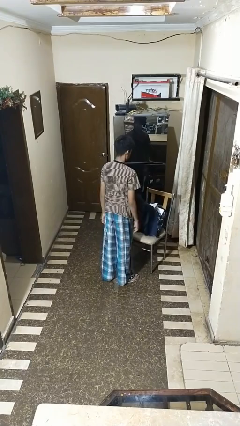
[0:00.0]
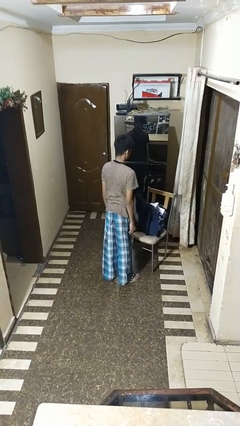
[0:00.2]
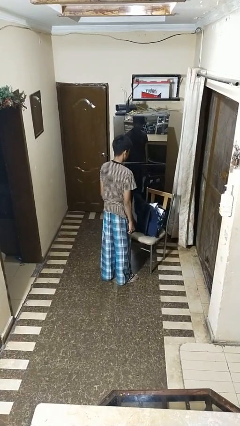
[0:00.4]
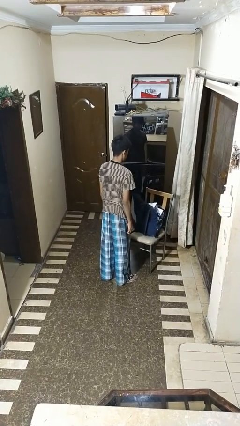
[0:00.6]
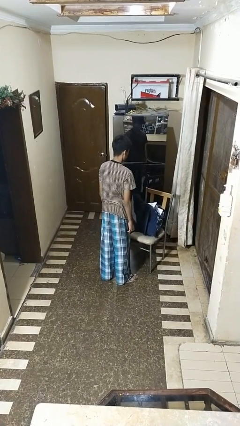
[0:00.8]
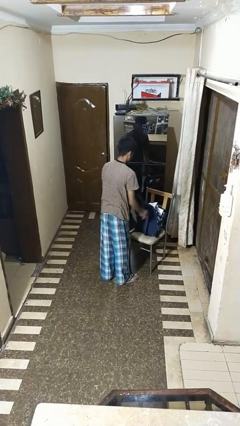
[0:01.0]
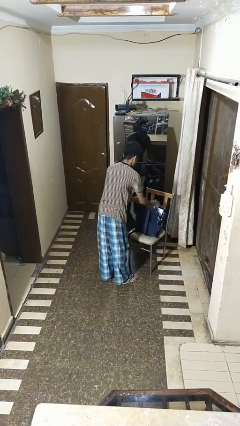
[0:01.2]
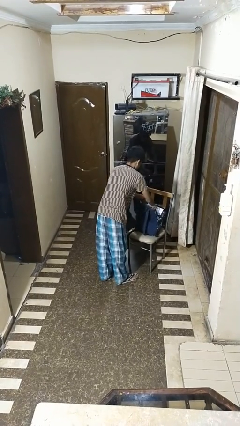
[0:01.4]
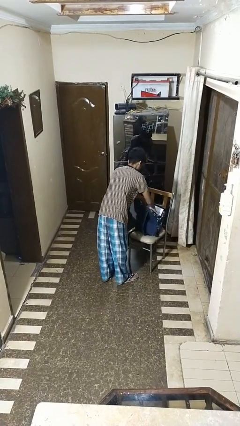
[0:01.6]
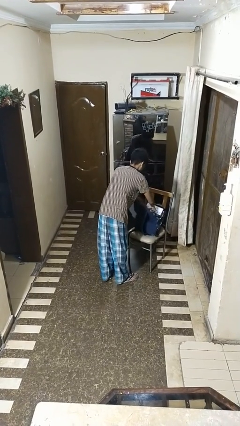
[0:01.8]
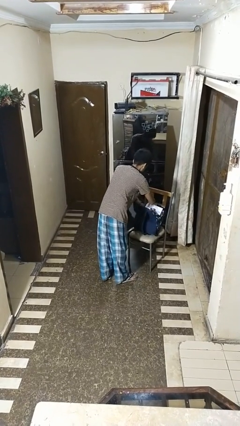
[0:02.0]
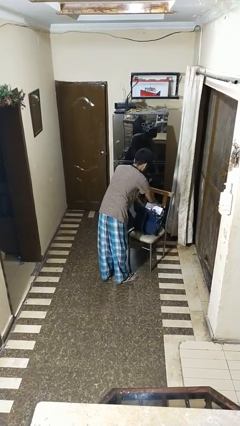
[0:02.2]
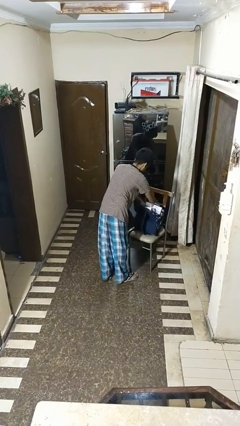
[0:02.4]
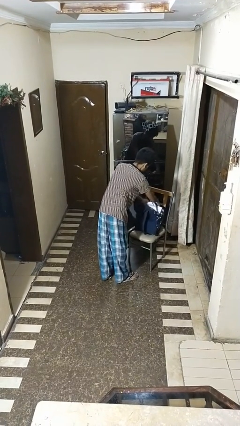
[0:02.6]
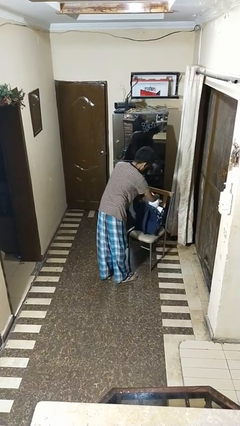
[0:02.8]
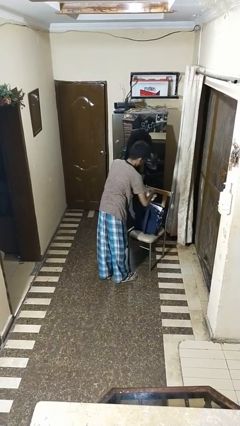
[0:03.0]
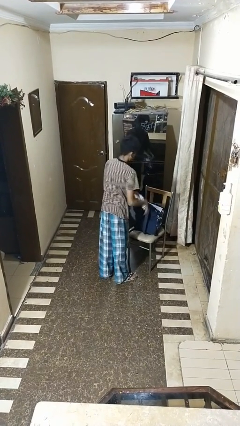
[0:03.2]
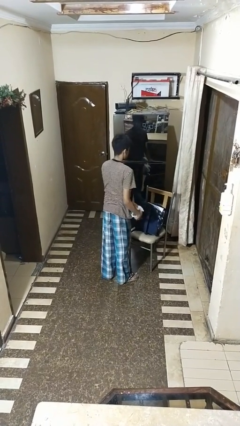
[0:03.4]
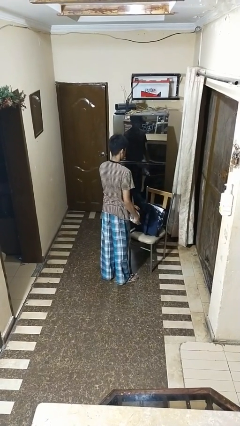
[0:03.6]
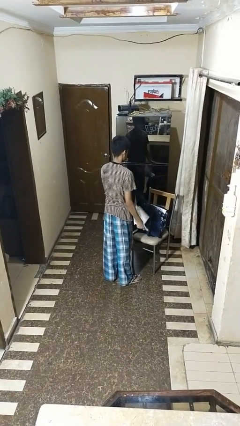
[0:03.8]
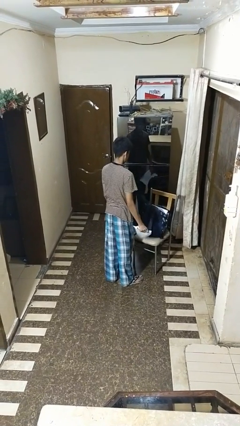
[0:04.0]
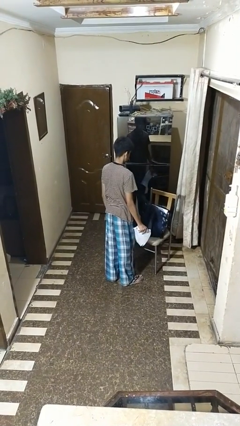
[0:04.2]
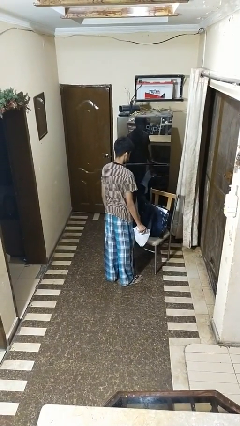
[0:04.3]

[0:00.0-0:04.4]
person takes object from bag

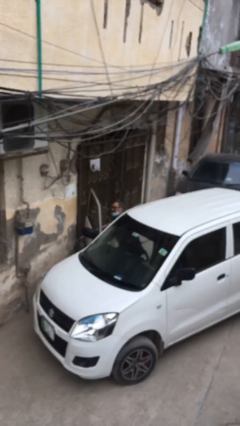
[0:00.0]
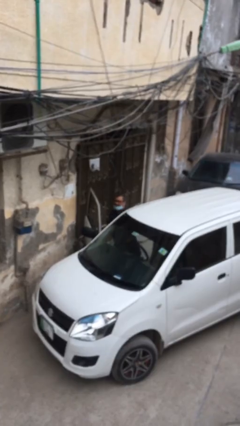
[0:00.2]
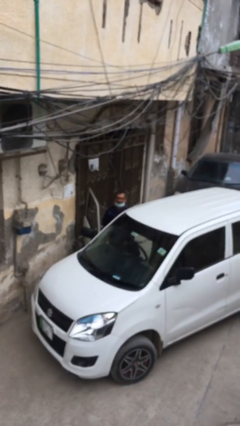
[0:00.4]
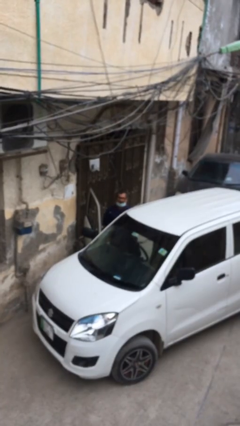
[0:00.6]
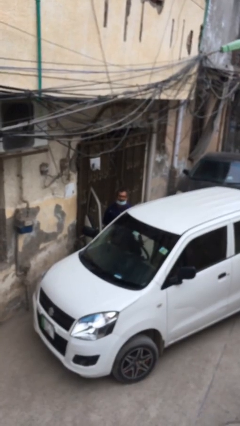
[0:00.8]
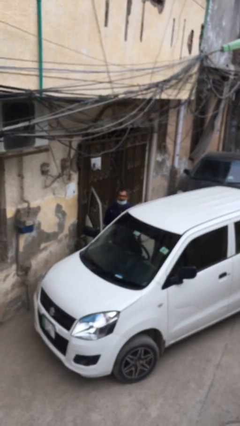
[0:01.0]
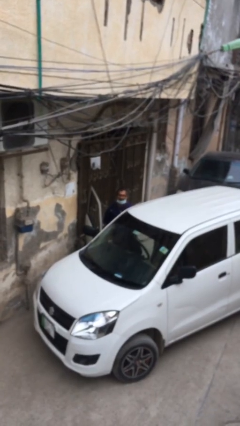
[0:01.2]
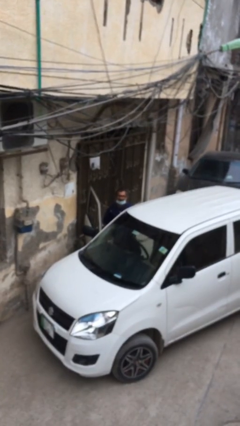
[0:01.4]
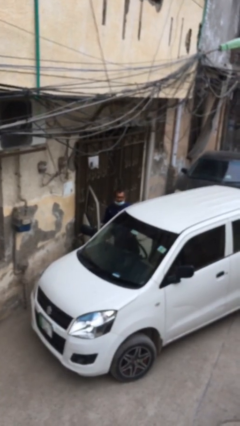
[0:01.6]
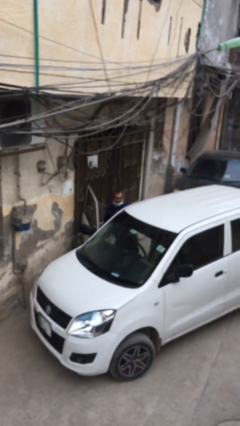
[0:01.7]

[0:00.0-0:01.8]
person exits car

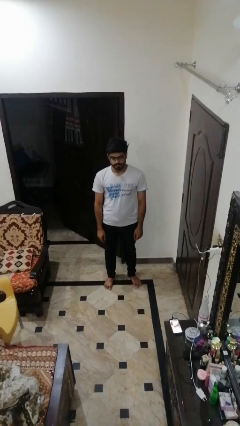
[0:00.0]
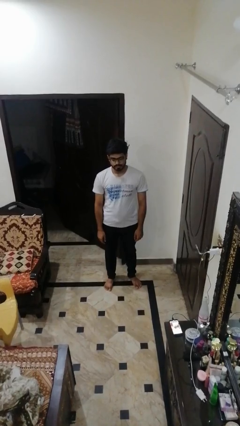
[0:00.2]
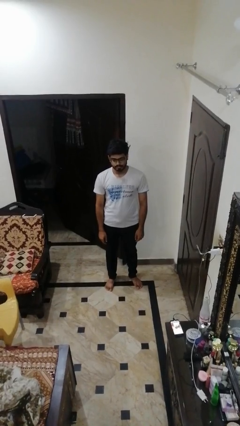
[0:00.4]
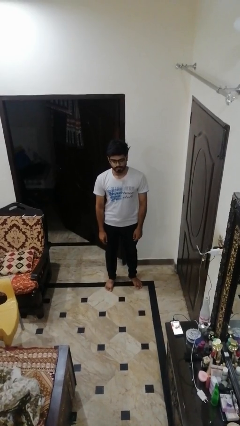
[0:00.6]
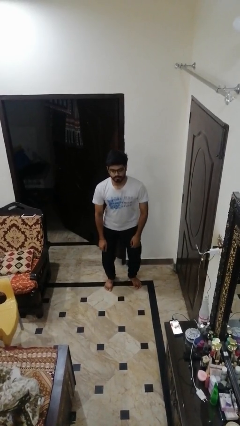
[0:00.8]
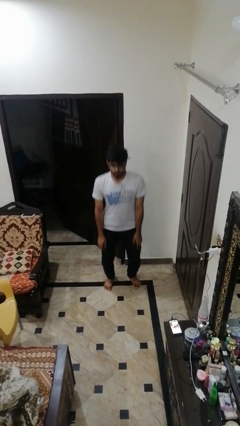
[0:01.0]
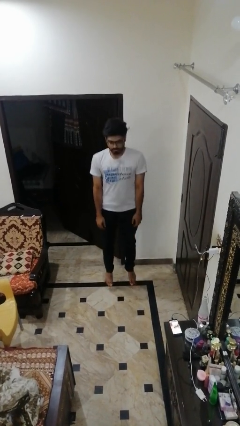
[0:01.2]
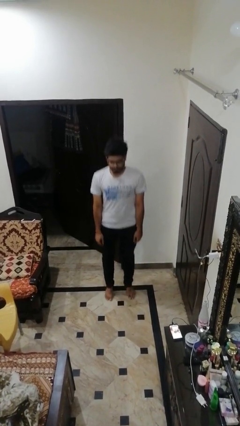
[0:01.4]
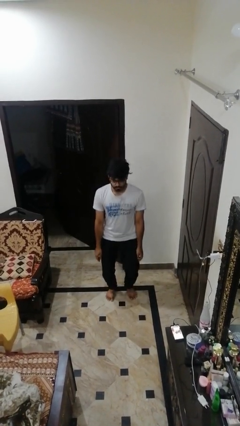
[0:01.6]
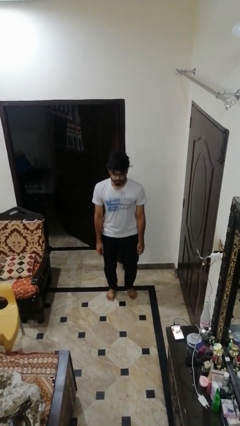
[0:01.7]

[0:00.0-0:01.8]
person jumps

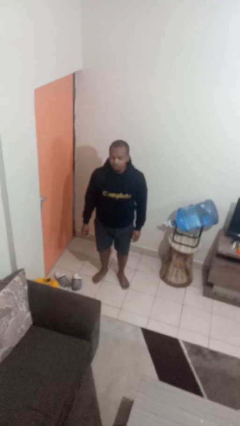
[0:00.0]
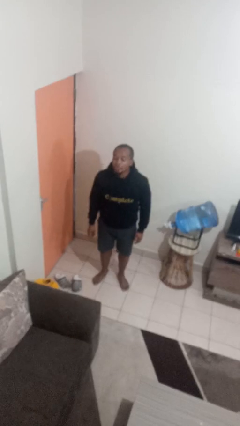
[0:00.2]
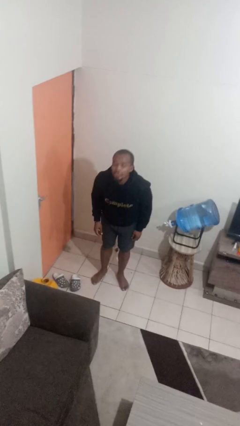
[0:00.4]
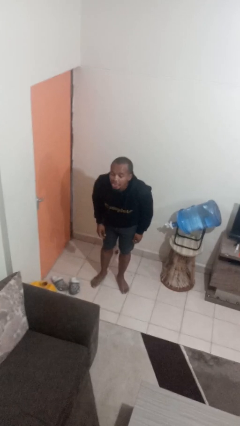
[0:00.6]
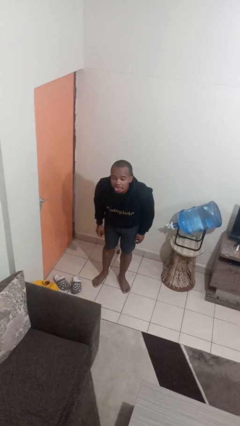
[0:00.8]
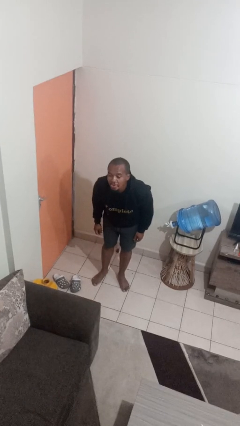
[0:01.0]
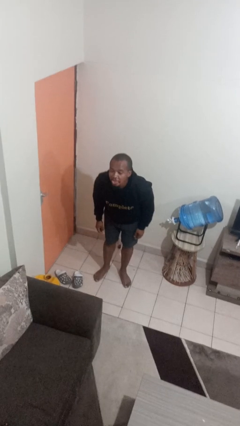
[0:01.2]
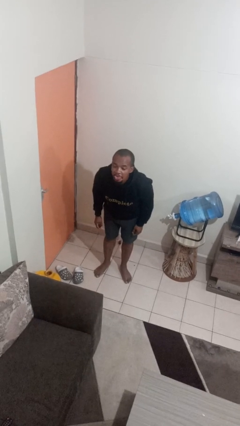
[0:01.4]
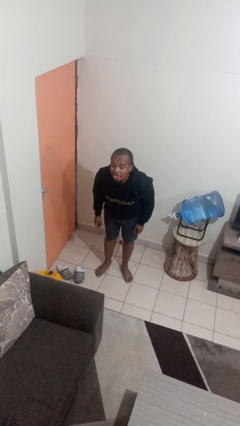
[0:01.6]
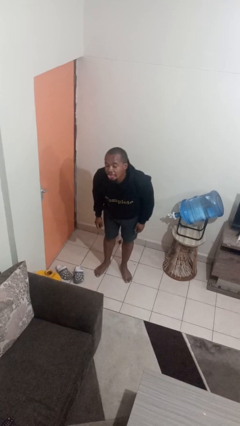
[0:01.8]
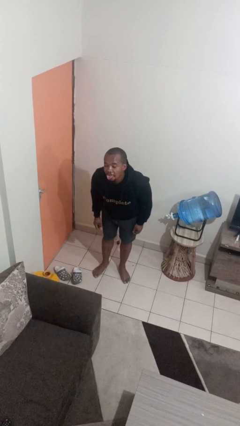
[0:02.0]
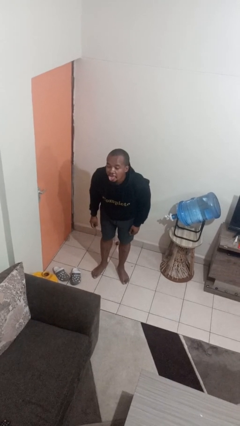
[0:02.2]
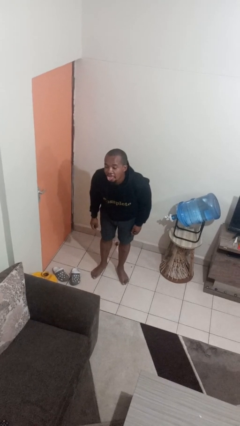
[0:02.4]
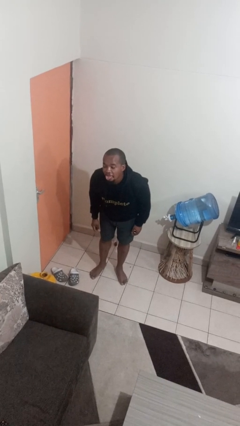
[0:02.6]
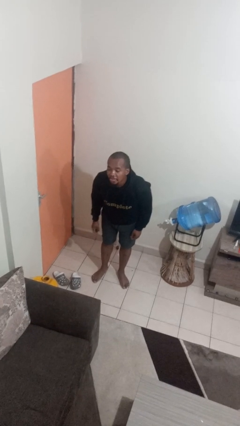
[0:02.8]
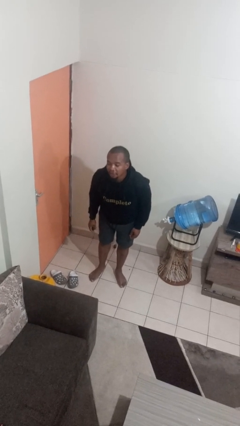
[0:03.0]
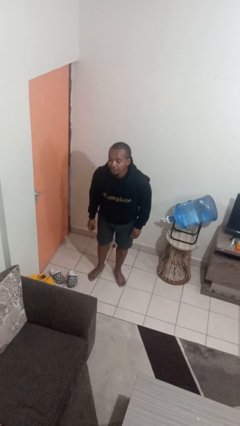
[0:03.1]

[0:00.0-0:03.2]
person sticks out tongue

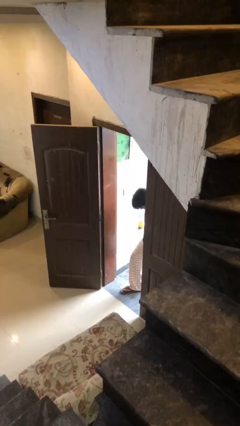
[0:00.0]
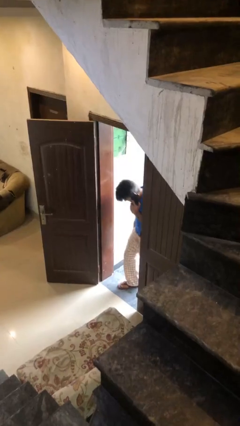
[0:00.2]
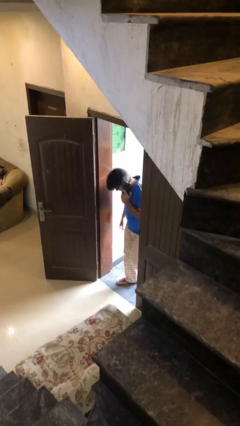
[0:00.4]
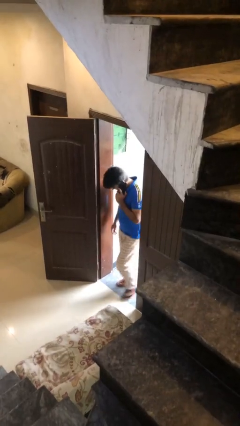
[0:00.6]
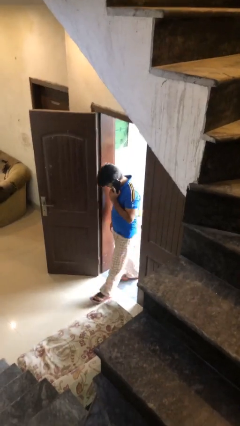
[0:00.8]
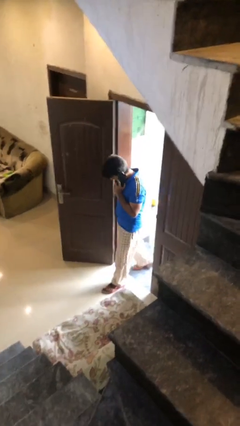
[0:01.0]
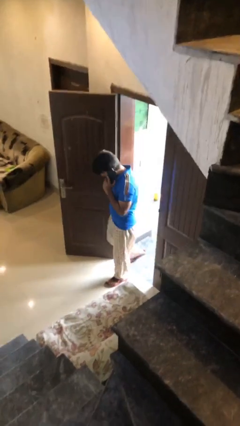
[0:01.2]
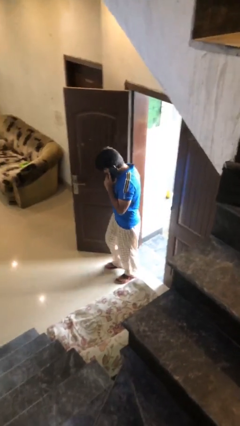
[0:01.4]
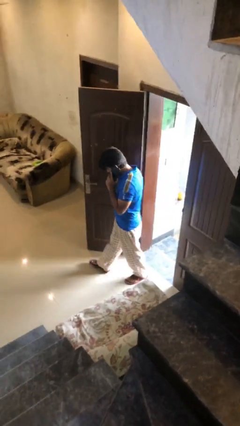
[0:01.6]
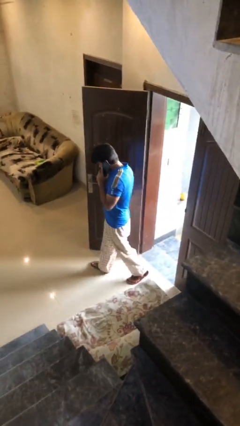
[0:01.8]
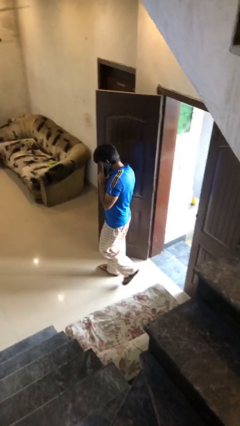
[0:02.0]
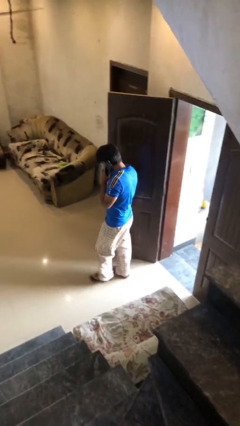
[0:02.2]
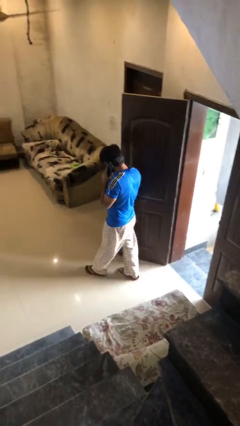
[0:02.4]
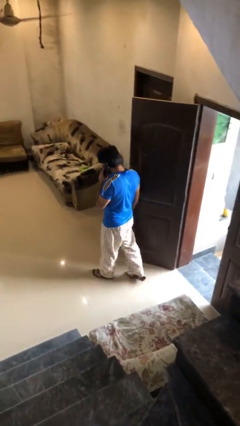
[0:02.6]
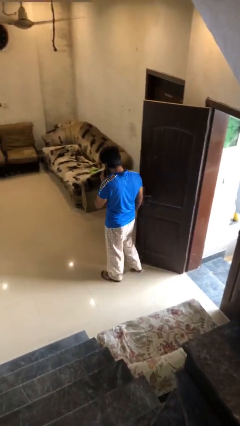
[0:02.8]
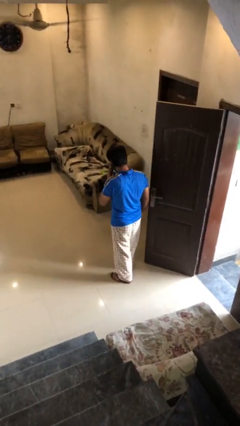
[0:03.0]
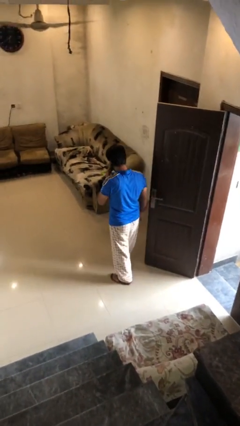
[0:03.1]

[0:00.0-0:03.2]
person enters scene through structure

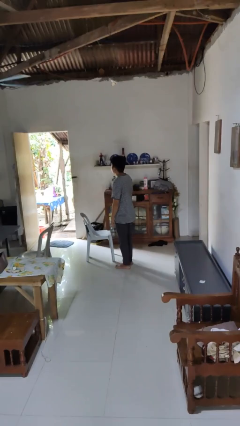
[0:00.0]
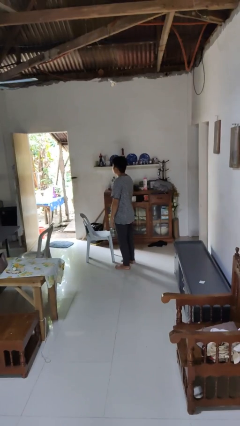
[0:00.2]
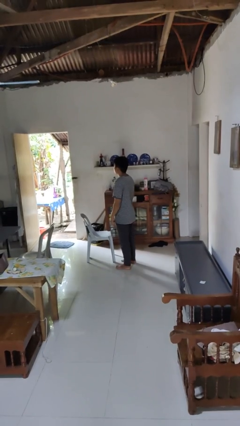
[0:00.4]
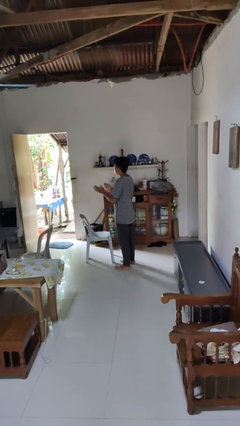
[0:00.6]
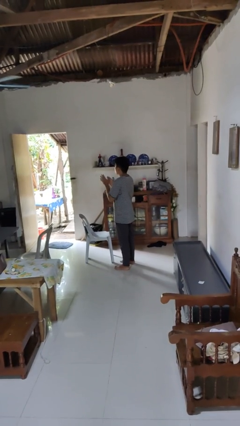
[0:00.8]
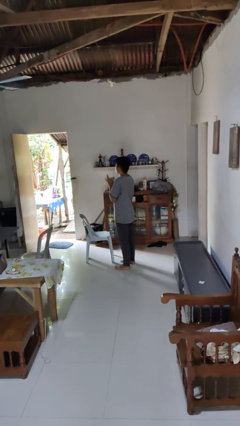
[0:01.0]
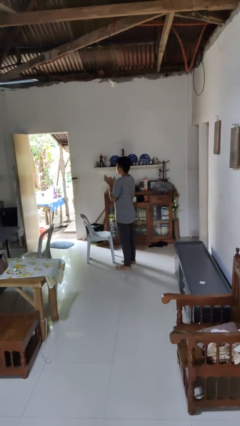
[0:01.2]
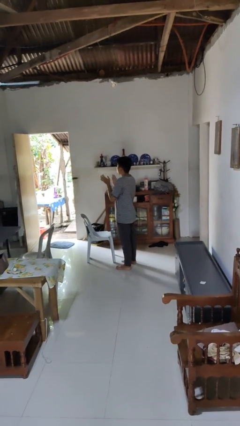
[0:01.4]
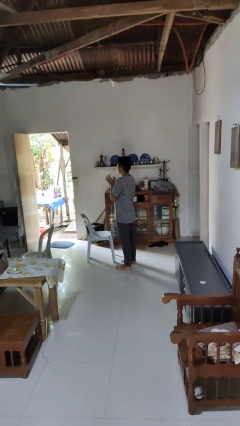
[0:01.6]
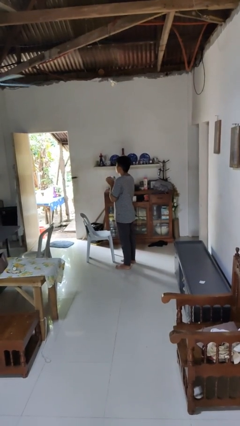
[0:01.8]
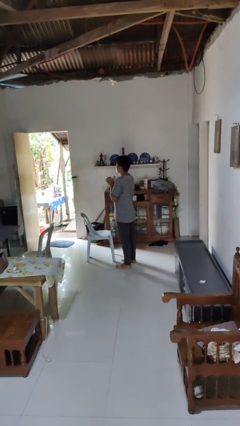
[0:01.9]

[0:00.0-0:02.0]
person claps hands

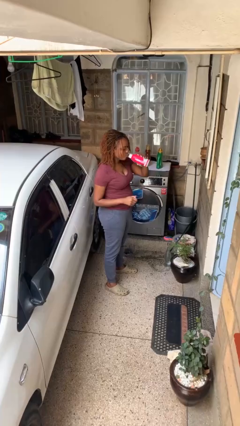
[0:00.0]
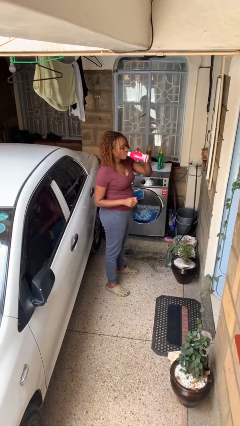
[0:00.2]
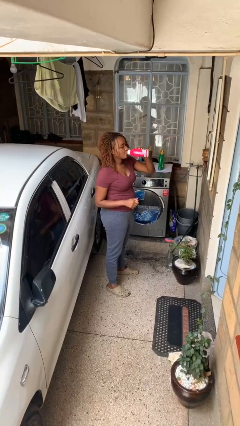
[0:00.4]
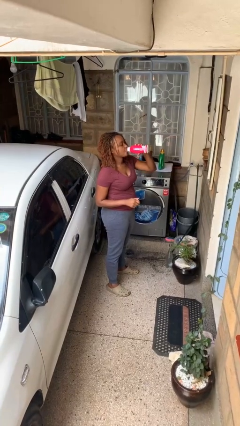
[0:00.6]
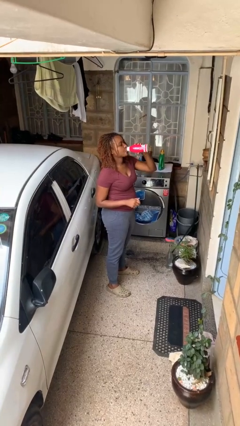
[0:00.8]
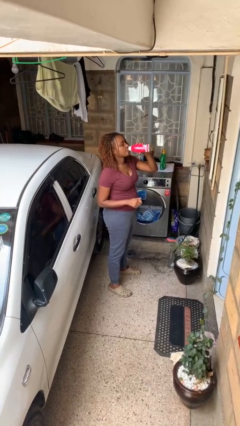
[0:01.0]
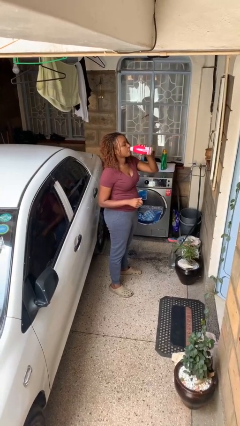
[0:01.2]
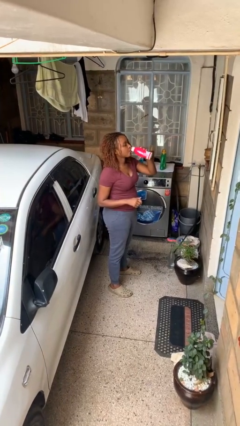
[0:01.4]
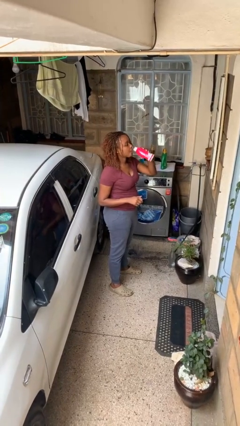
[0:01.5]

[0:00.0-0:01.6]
person drinks from beverage can
